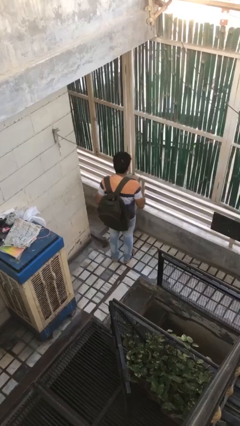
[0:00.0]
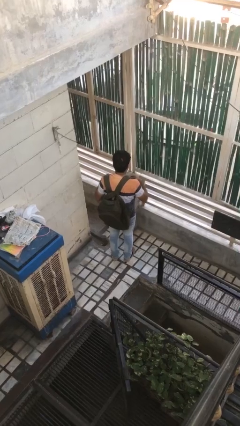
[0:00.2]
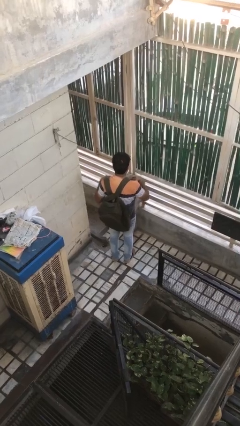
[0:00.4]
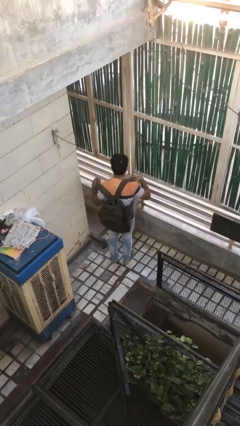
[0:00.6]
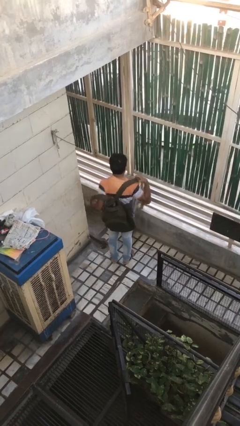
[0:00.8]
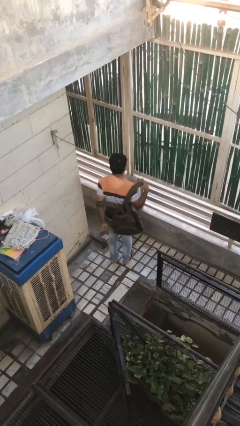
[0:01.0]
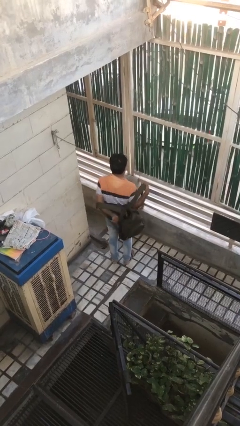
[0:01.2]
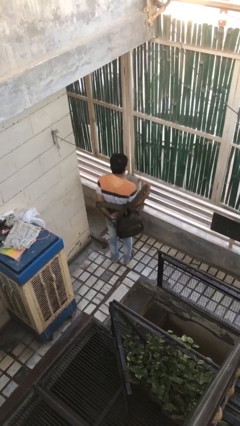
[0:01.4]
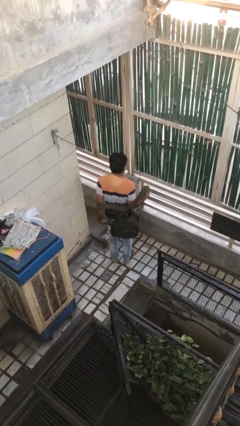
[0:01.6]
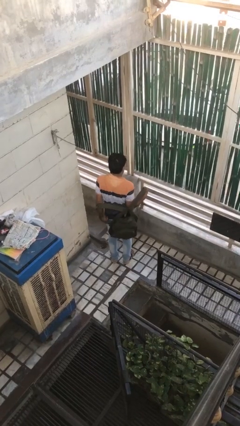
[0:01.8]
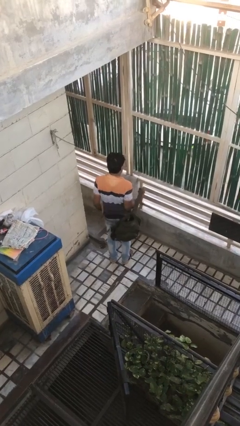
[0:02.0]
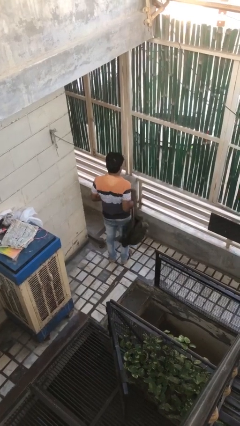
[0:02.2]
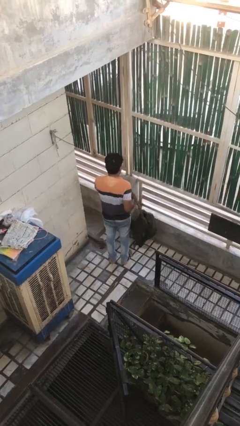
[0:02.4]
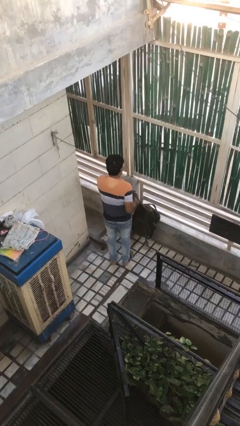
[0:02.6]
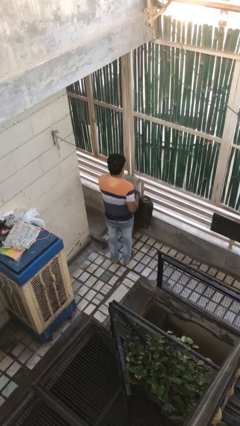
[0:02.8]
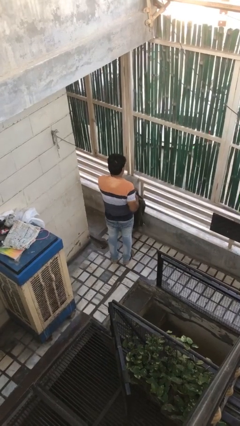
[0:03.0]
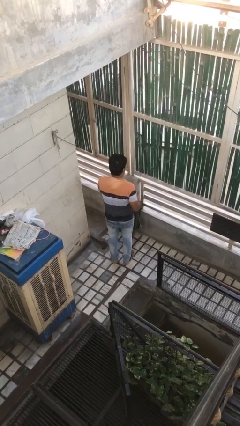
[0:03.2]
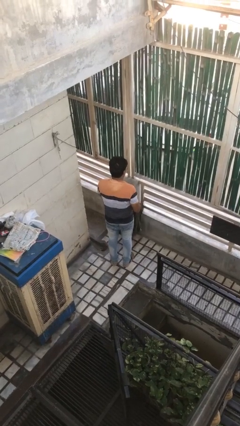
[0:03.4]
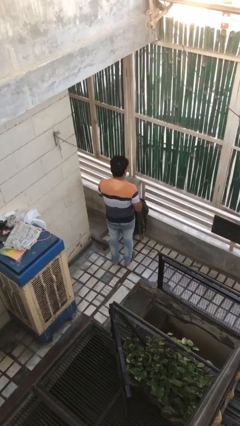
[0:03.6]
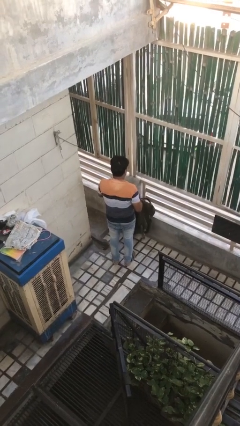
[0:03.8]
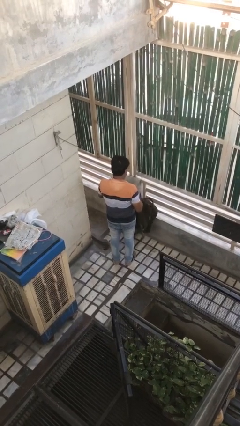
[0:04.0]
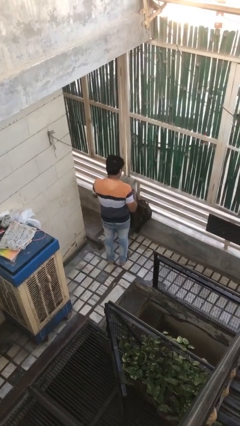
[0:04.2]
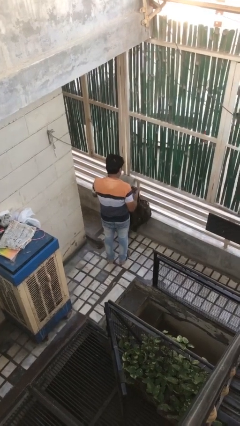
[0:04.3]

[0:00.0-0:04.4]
person takes off backpack

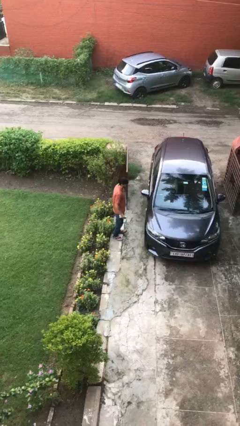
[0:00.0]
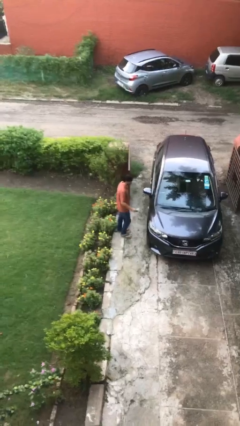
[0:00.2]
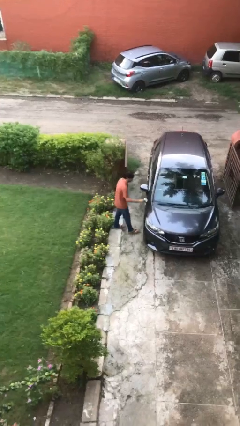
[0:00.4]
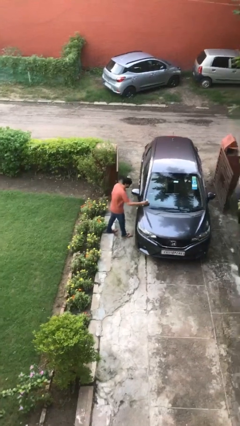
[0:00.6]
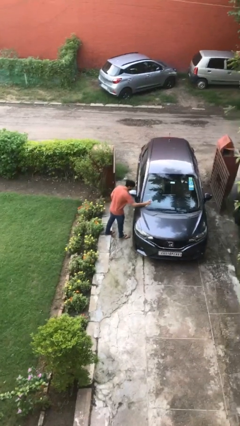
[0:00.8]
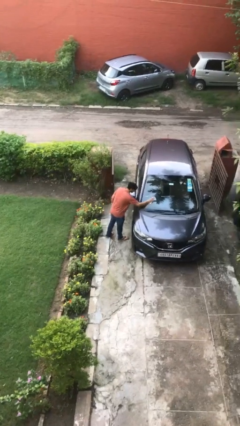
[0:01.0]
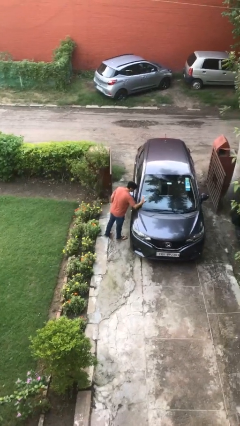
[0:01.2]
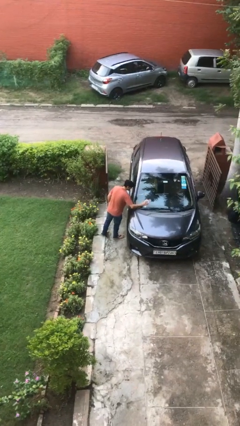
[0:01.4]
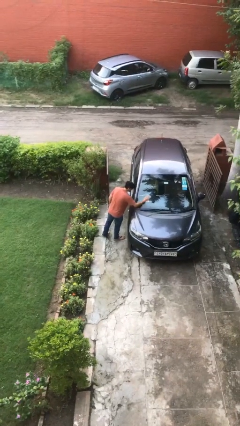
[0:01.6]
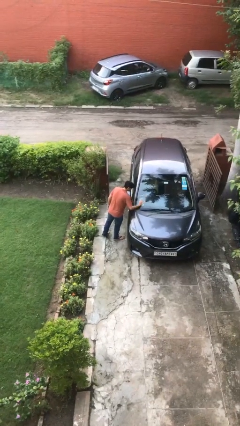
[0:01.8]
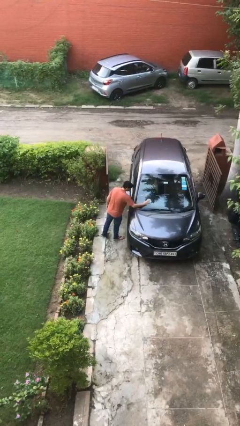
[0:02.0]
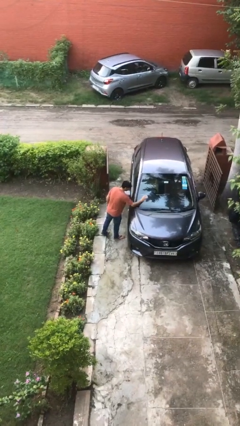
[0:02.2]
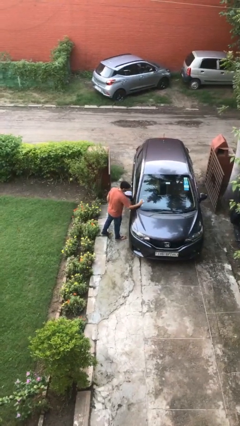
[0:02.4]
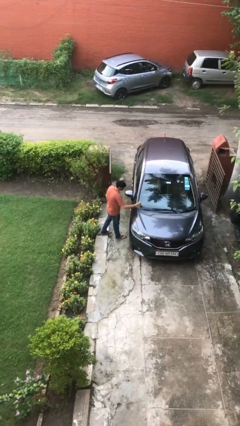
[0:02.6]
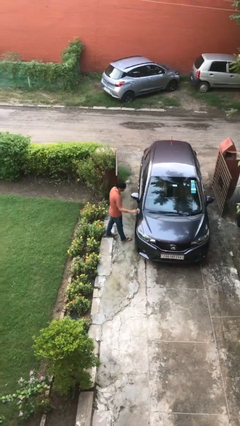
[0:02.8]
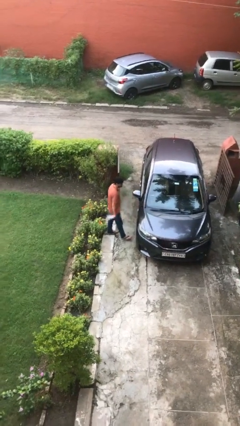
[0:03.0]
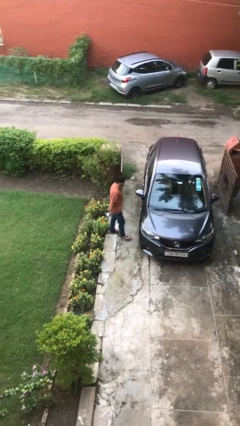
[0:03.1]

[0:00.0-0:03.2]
person polishes car with rag

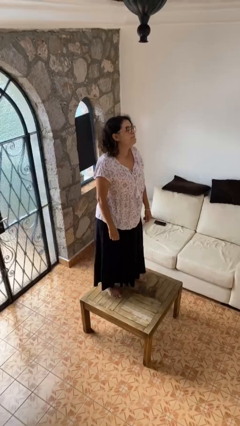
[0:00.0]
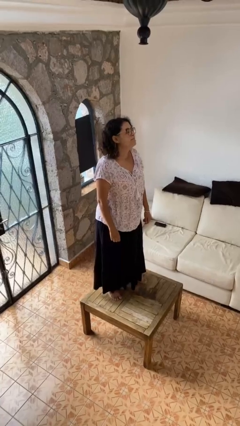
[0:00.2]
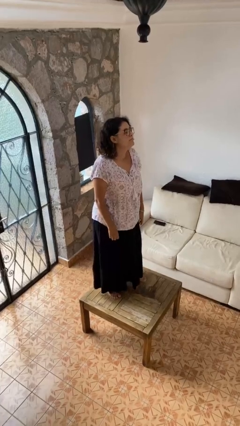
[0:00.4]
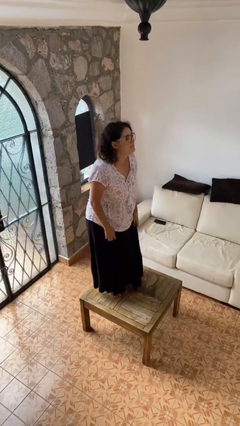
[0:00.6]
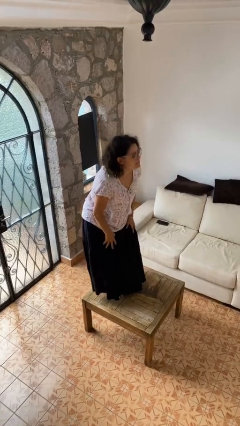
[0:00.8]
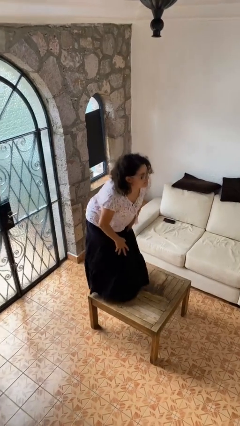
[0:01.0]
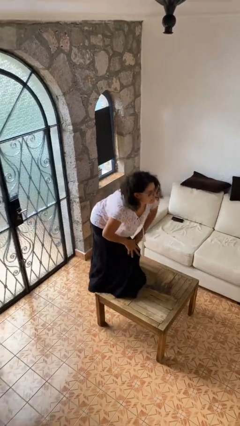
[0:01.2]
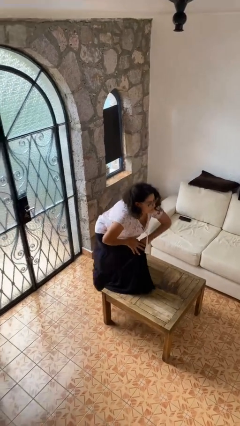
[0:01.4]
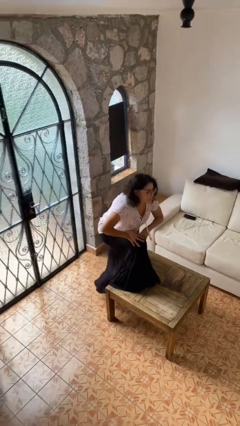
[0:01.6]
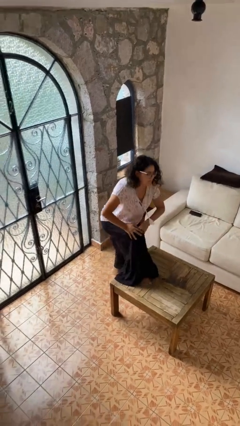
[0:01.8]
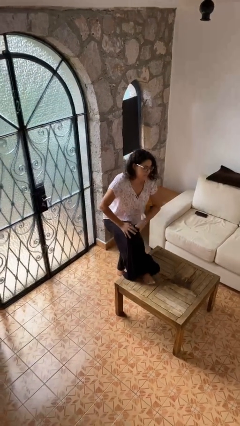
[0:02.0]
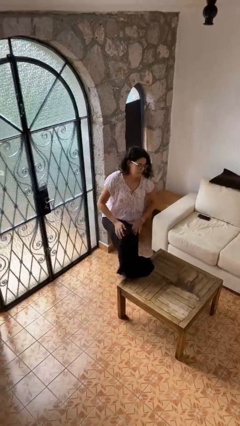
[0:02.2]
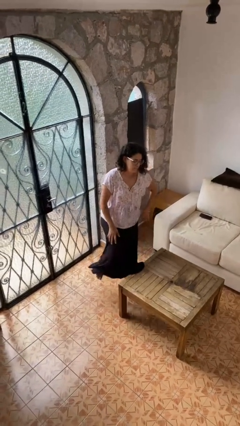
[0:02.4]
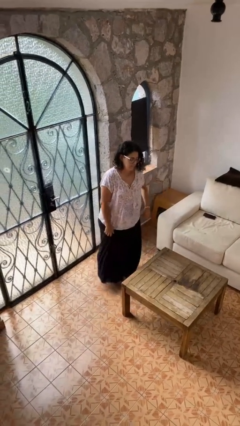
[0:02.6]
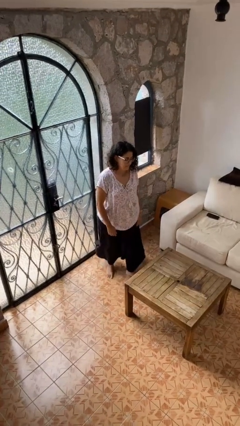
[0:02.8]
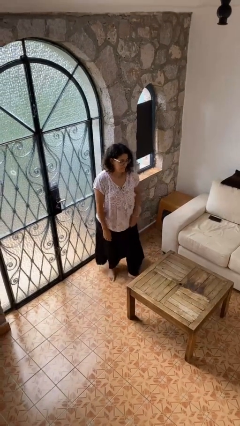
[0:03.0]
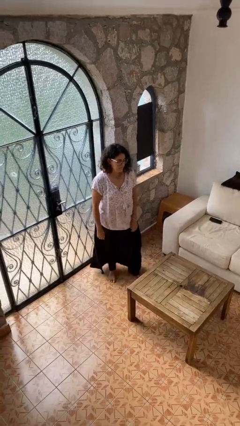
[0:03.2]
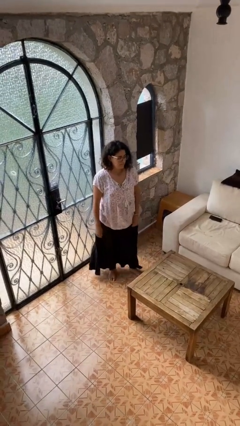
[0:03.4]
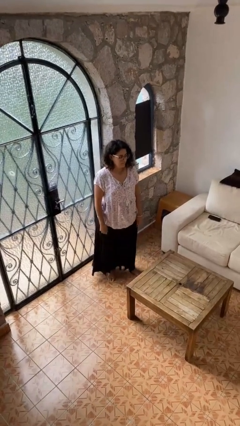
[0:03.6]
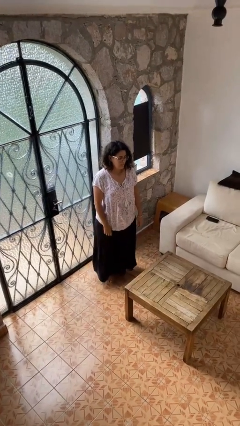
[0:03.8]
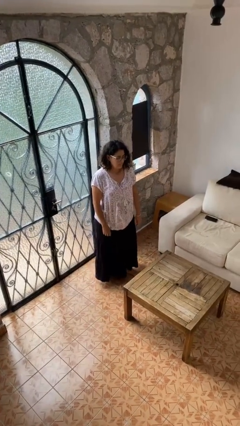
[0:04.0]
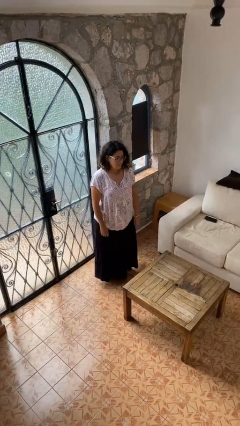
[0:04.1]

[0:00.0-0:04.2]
person climbs off table

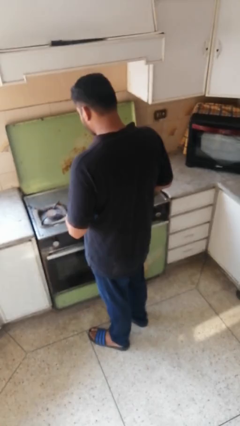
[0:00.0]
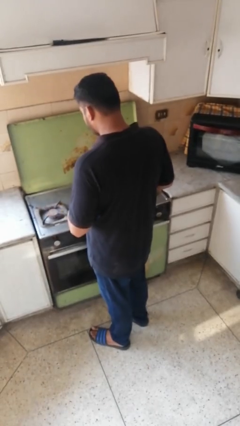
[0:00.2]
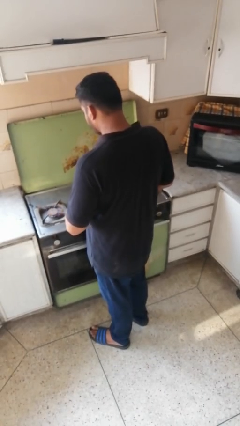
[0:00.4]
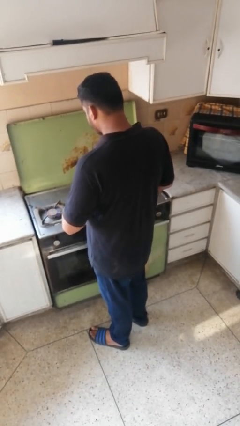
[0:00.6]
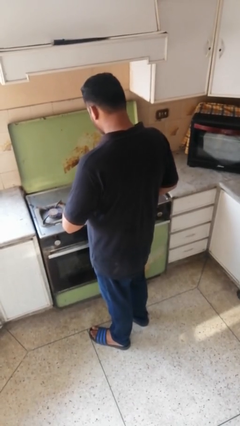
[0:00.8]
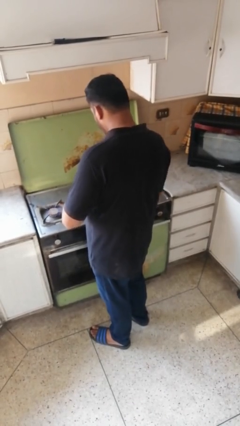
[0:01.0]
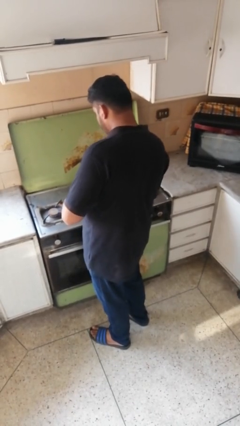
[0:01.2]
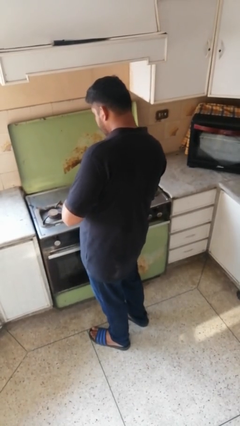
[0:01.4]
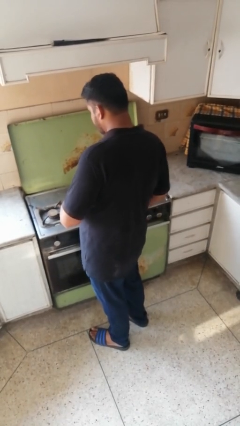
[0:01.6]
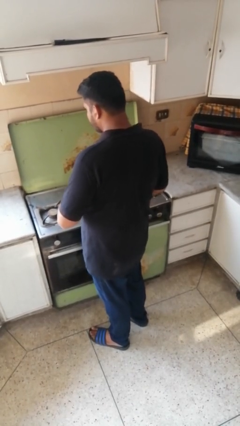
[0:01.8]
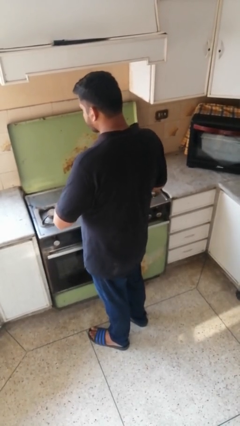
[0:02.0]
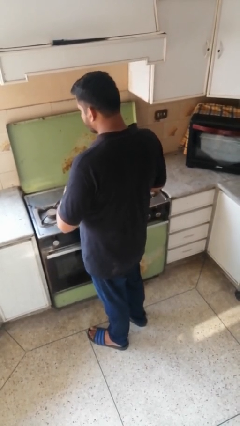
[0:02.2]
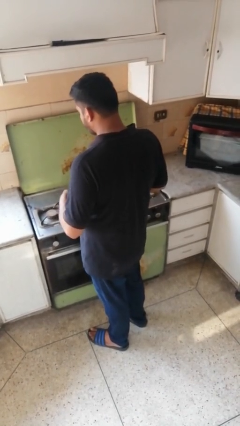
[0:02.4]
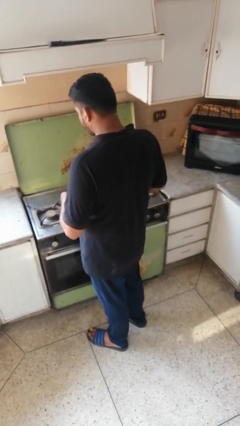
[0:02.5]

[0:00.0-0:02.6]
person turns off stovetop

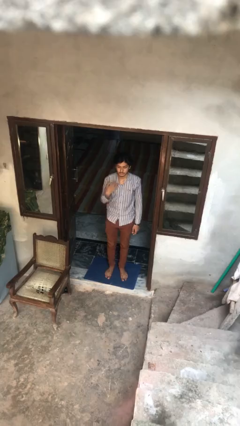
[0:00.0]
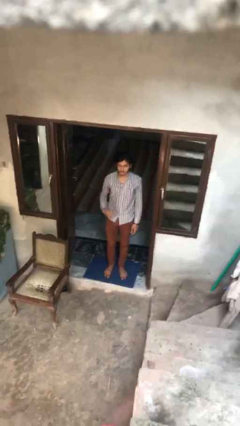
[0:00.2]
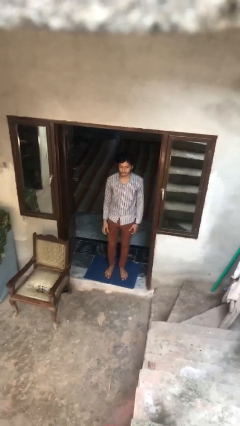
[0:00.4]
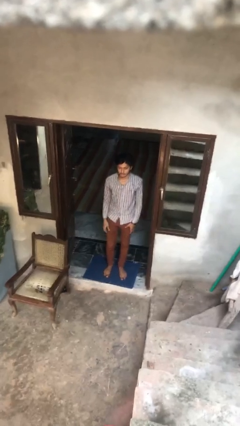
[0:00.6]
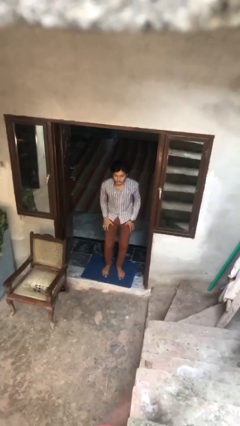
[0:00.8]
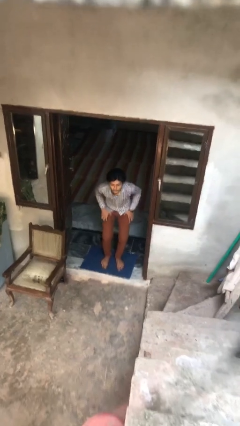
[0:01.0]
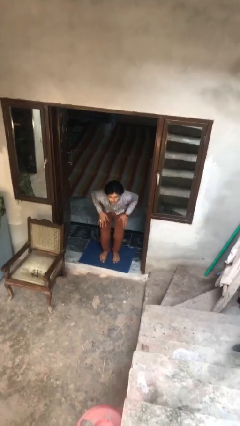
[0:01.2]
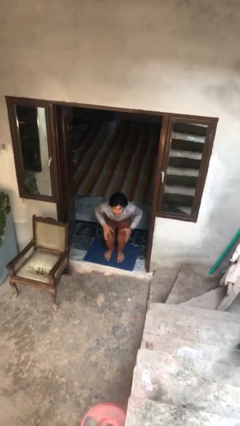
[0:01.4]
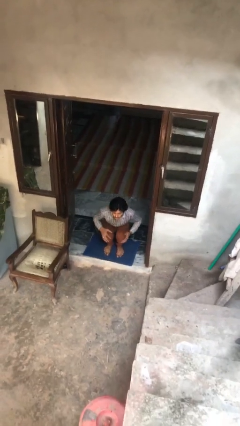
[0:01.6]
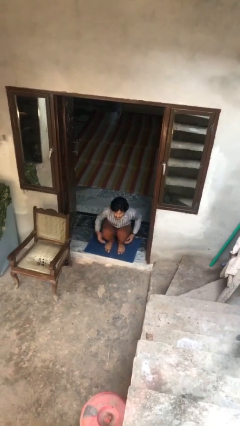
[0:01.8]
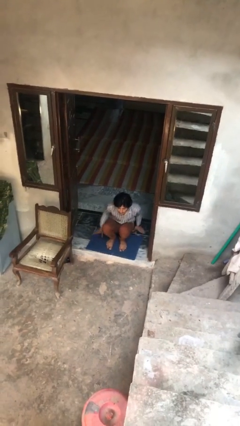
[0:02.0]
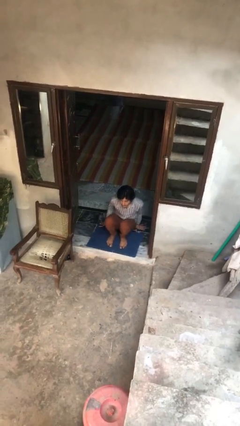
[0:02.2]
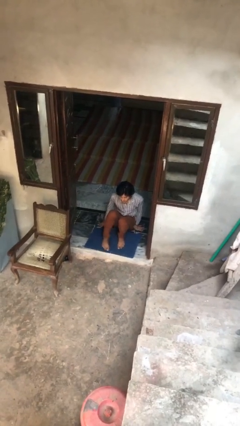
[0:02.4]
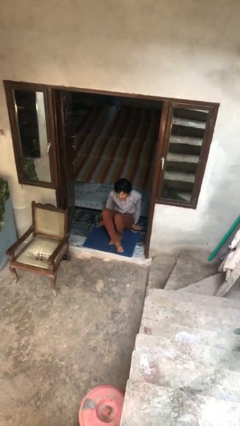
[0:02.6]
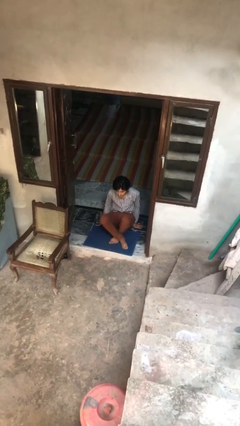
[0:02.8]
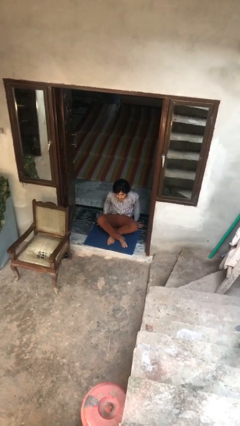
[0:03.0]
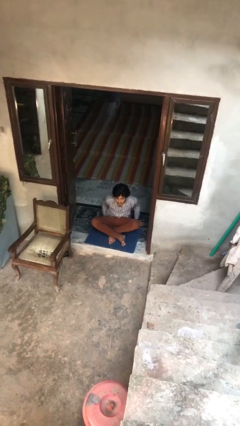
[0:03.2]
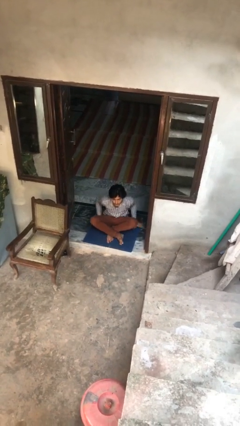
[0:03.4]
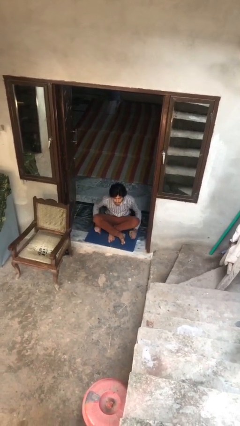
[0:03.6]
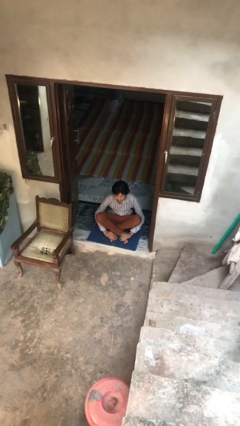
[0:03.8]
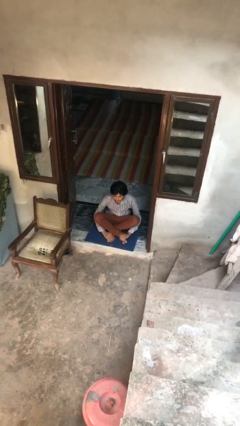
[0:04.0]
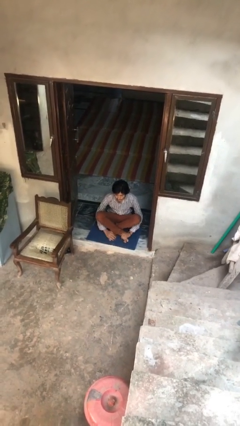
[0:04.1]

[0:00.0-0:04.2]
person sits crisscross
